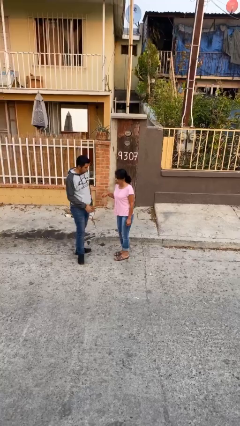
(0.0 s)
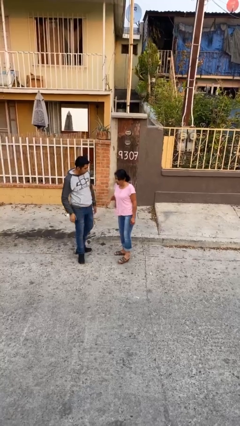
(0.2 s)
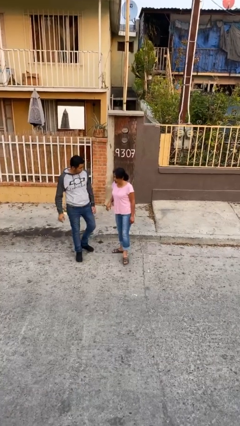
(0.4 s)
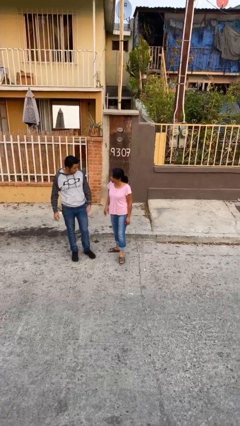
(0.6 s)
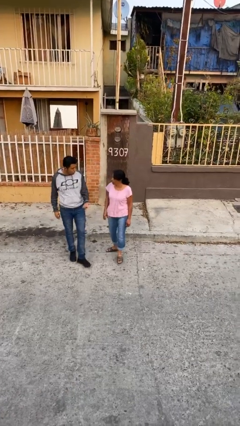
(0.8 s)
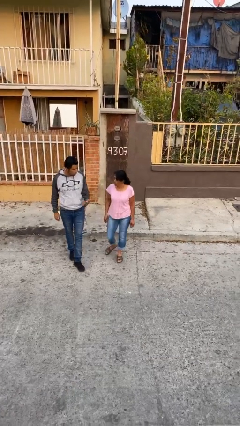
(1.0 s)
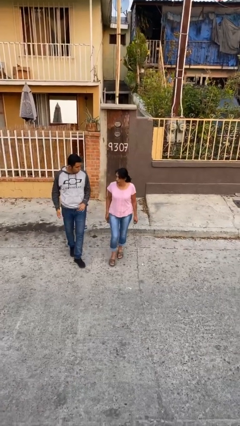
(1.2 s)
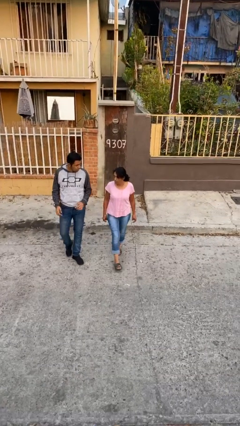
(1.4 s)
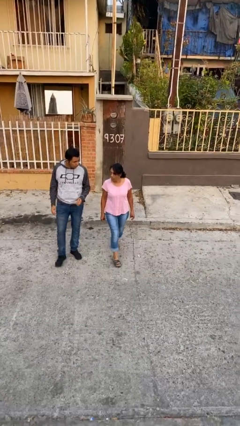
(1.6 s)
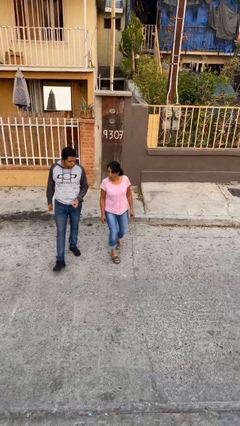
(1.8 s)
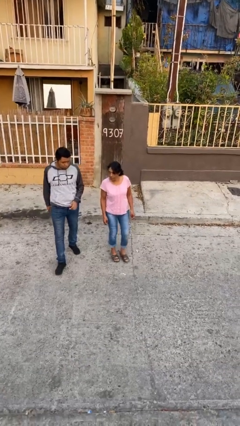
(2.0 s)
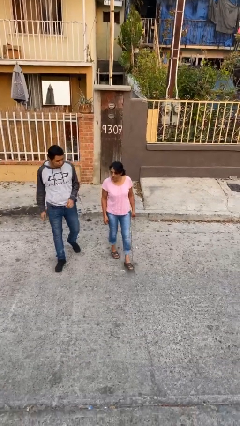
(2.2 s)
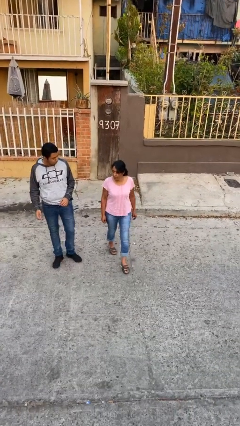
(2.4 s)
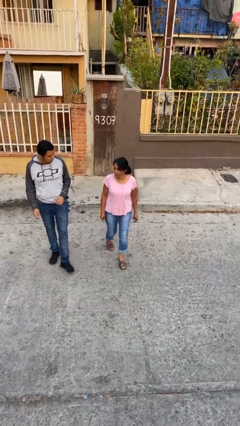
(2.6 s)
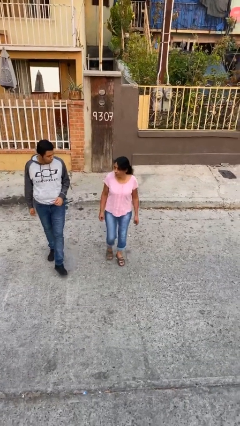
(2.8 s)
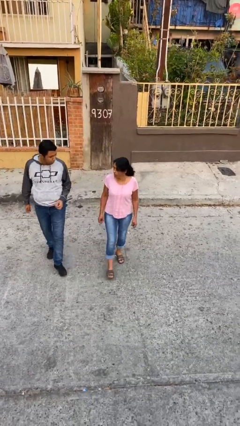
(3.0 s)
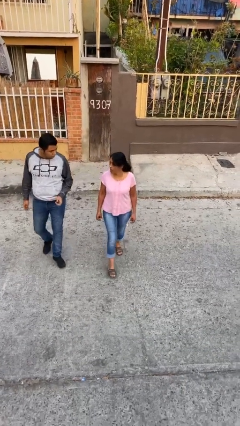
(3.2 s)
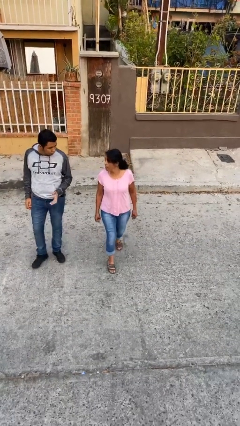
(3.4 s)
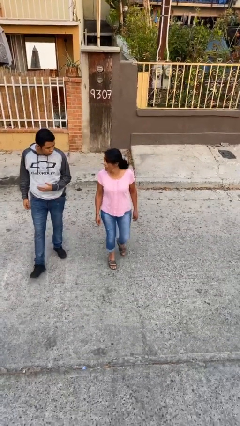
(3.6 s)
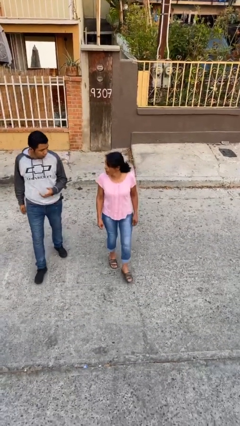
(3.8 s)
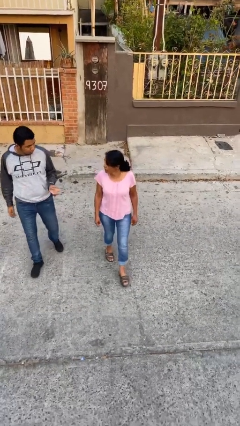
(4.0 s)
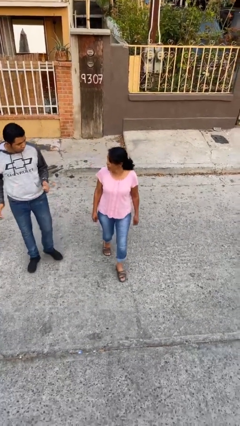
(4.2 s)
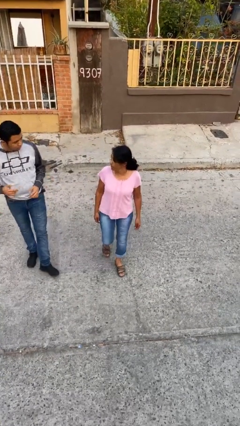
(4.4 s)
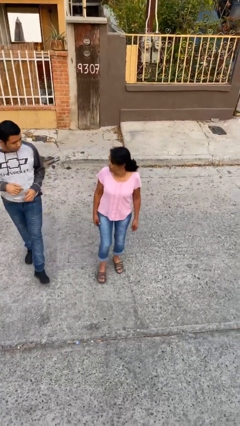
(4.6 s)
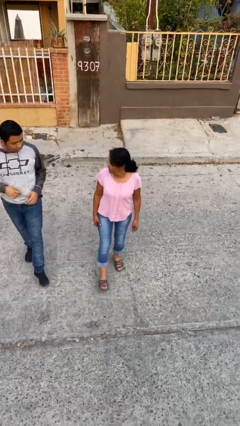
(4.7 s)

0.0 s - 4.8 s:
person talks to person

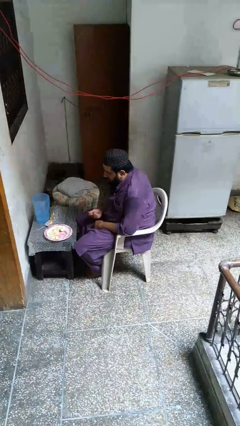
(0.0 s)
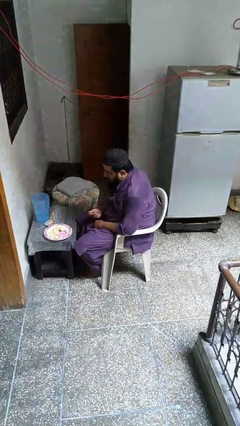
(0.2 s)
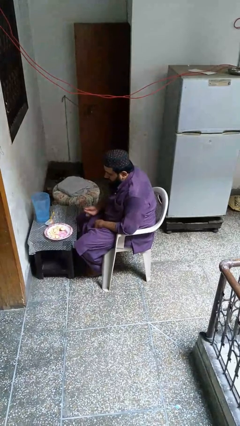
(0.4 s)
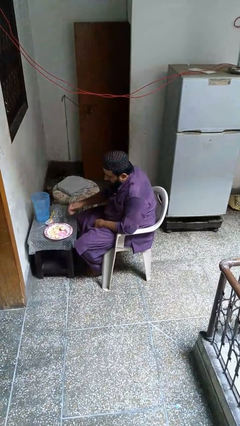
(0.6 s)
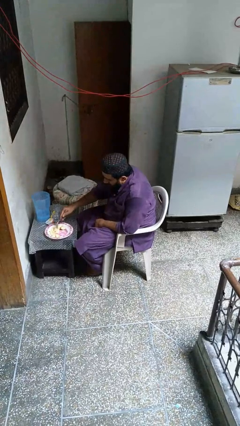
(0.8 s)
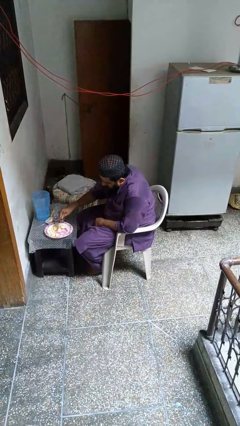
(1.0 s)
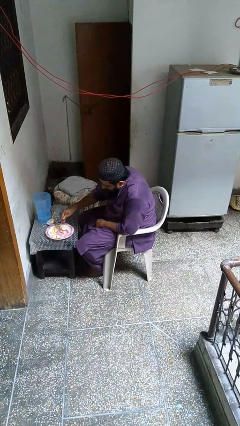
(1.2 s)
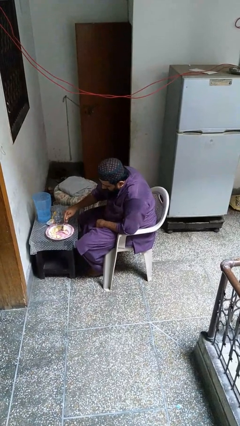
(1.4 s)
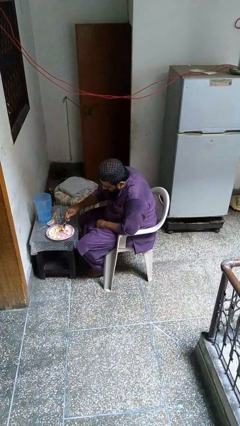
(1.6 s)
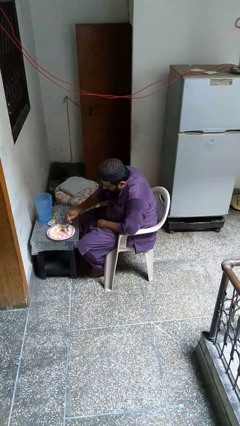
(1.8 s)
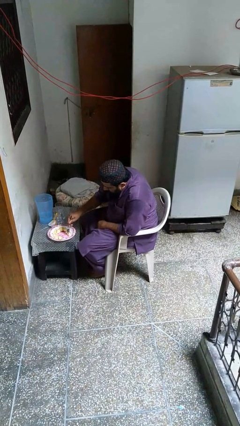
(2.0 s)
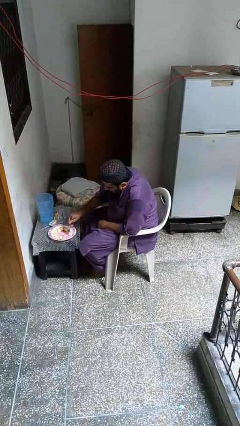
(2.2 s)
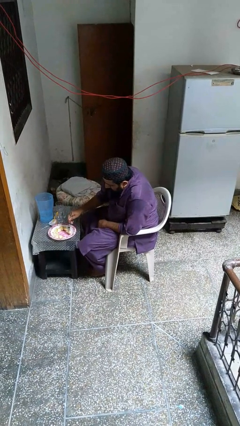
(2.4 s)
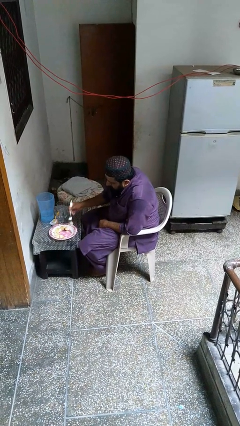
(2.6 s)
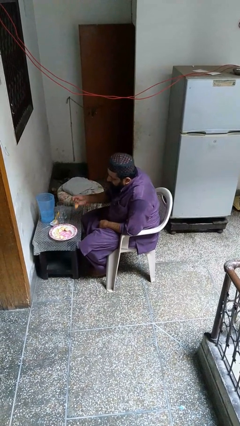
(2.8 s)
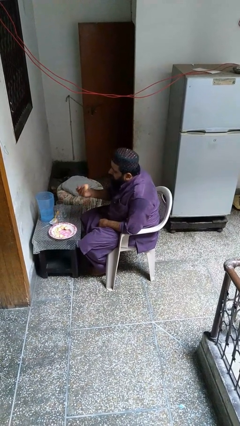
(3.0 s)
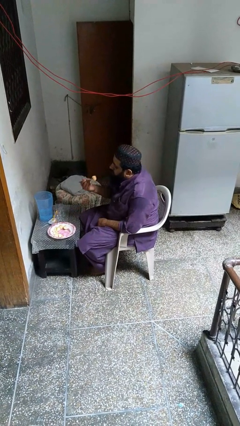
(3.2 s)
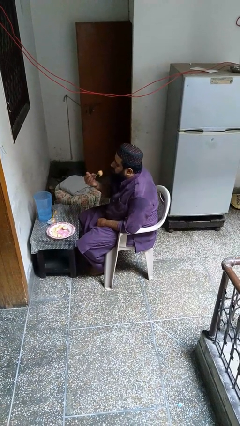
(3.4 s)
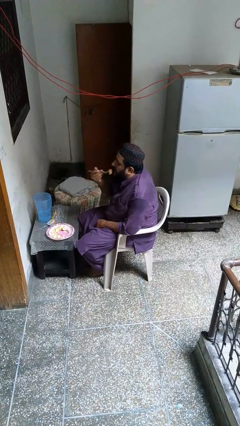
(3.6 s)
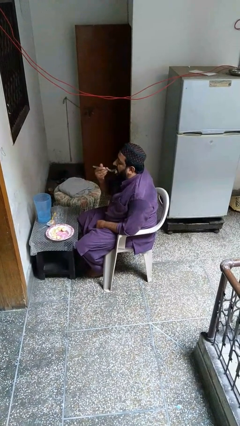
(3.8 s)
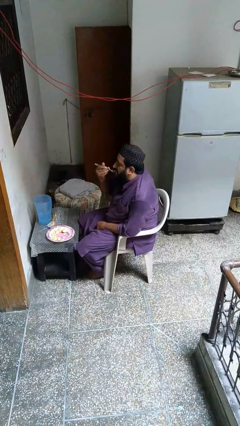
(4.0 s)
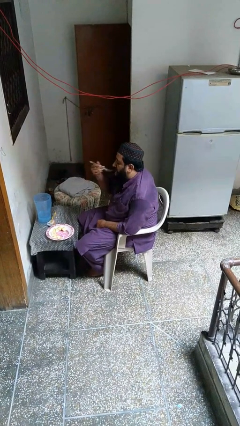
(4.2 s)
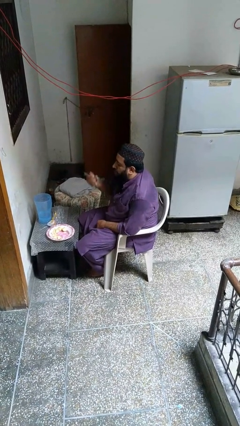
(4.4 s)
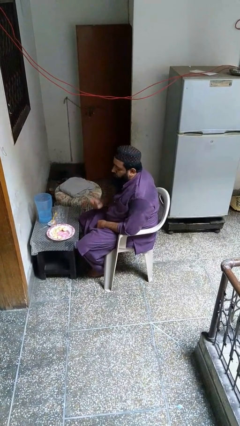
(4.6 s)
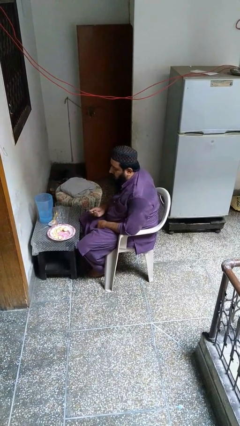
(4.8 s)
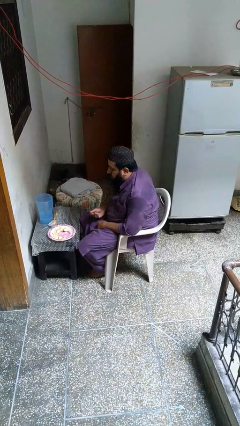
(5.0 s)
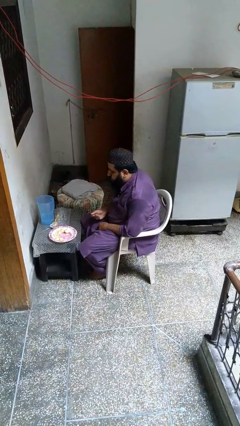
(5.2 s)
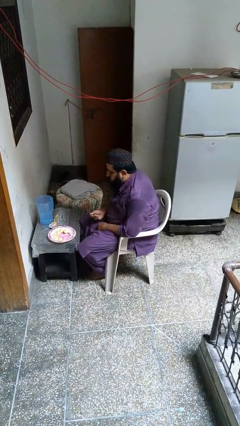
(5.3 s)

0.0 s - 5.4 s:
person eats with utensil

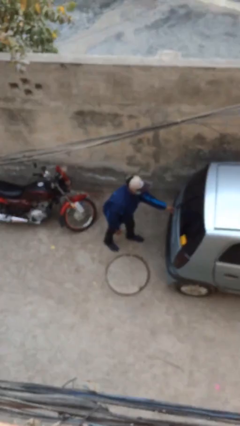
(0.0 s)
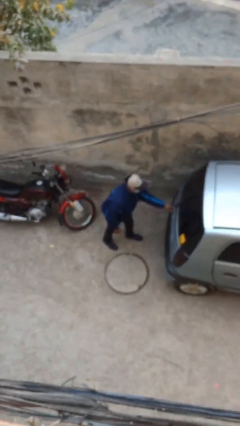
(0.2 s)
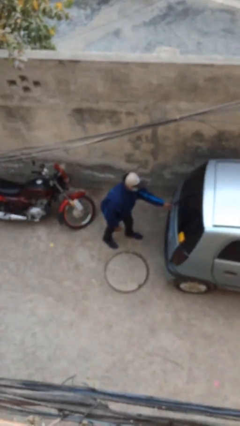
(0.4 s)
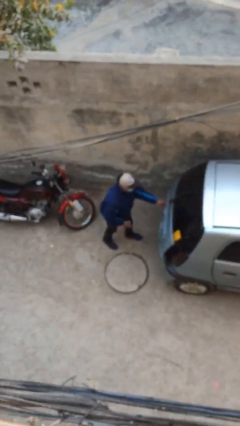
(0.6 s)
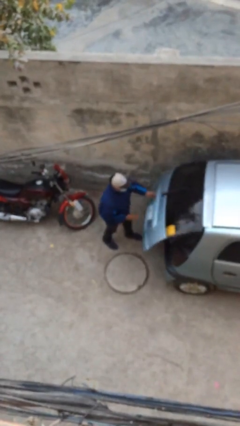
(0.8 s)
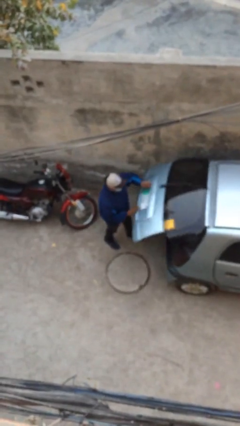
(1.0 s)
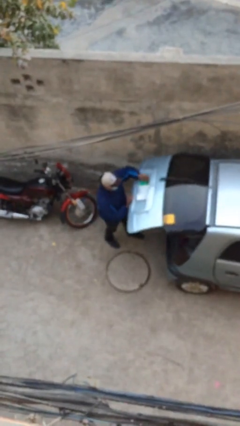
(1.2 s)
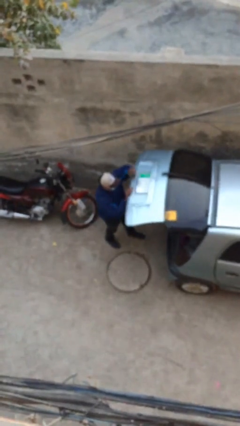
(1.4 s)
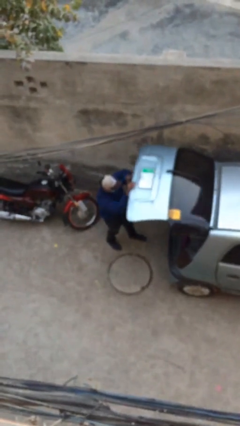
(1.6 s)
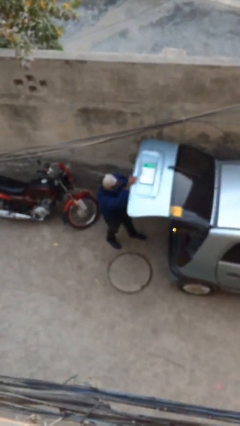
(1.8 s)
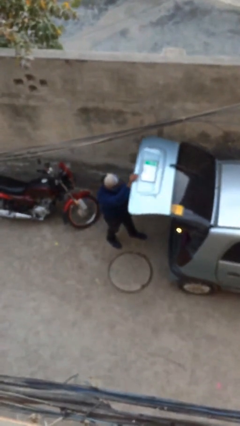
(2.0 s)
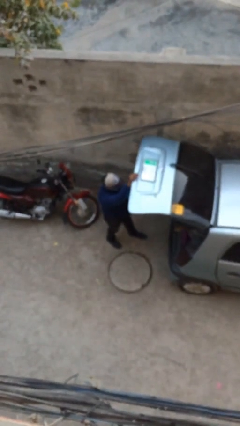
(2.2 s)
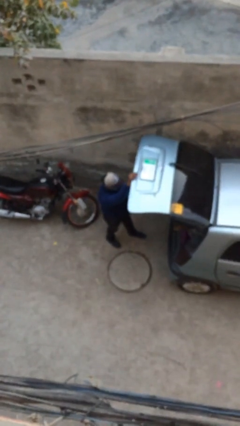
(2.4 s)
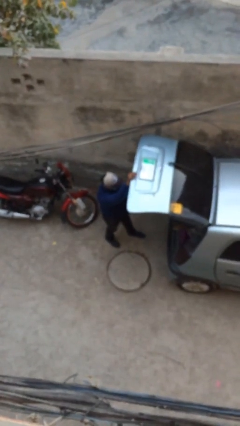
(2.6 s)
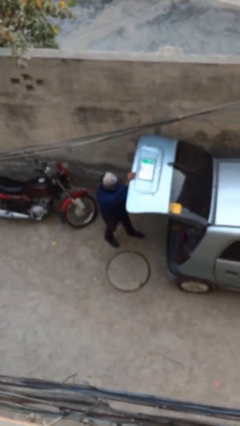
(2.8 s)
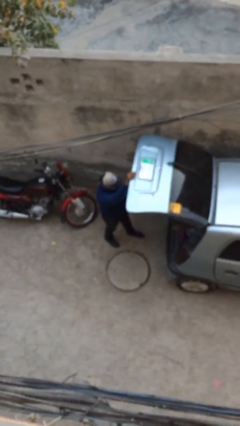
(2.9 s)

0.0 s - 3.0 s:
person opens car trunk

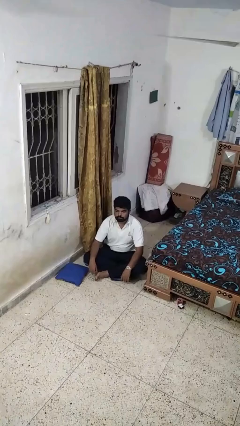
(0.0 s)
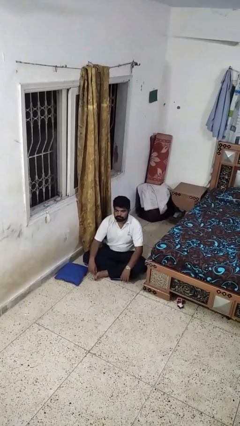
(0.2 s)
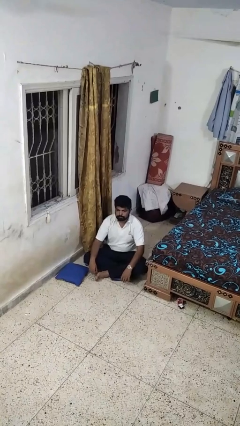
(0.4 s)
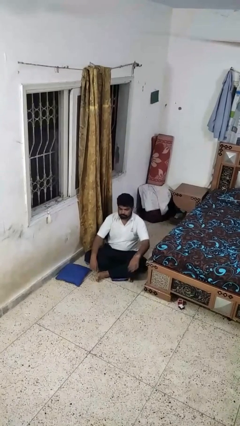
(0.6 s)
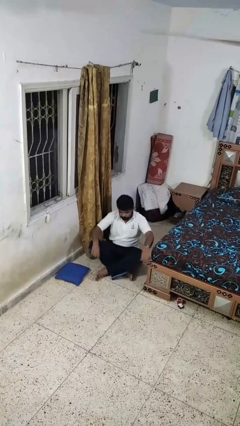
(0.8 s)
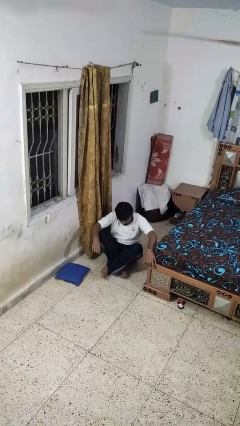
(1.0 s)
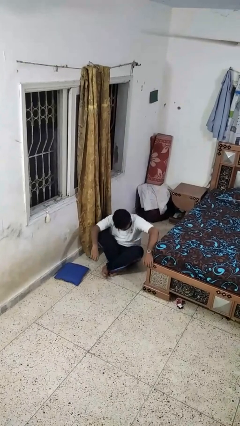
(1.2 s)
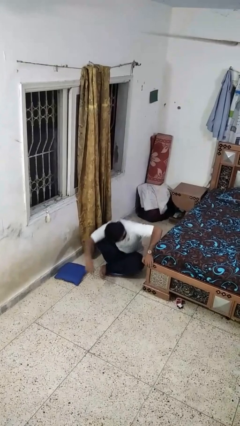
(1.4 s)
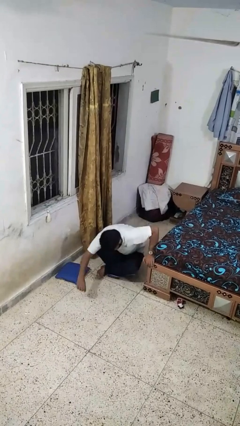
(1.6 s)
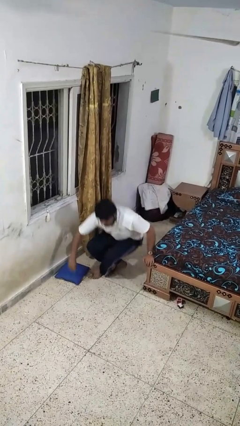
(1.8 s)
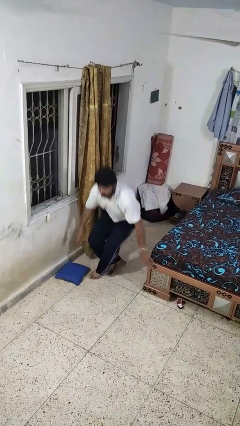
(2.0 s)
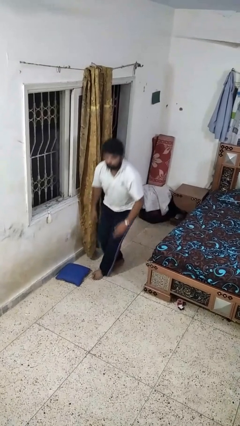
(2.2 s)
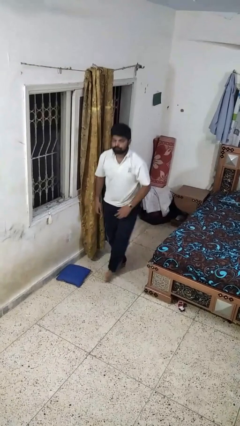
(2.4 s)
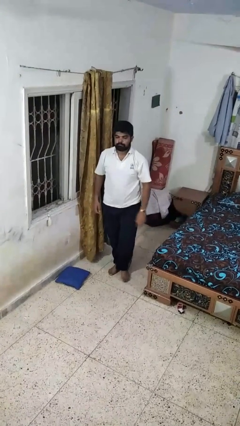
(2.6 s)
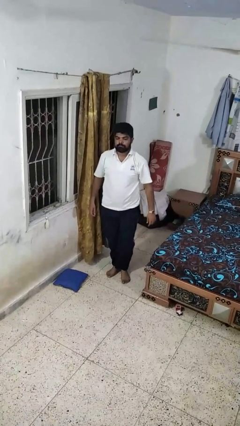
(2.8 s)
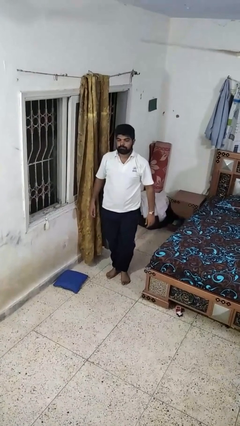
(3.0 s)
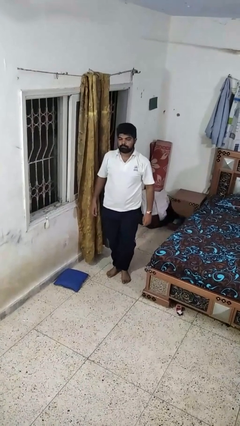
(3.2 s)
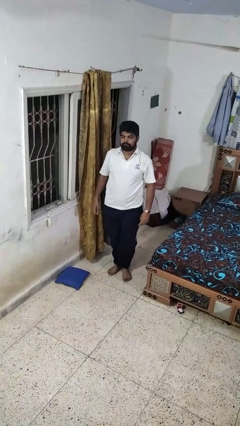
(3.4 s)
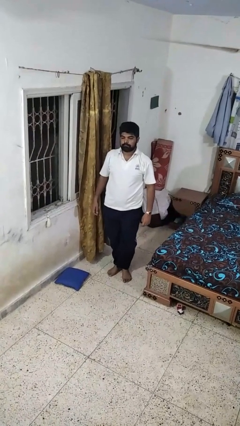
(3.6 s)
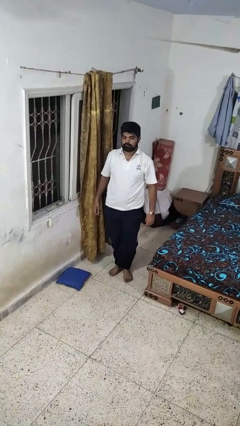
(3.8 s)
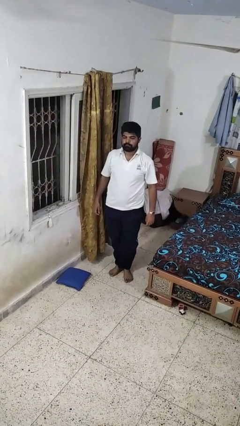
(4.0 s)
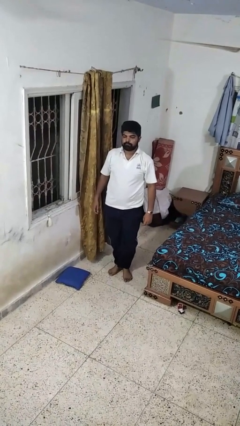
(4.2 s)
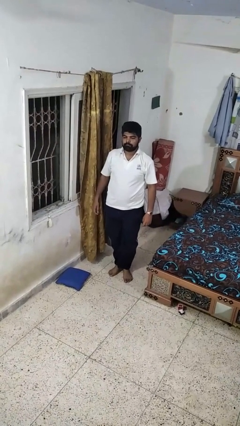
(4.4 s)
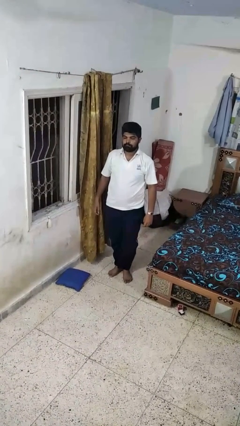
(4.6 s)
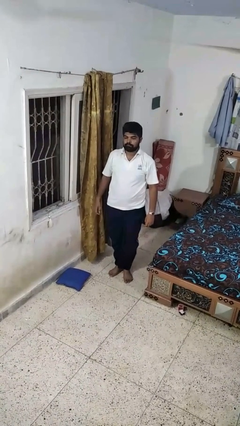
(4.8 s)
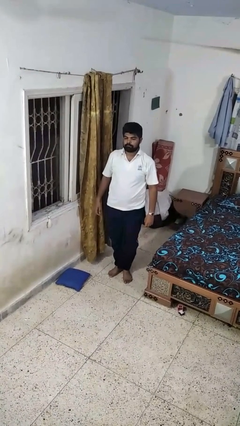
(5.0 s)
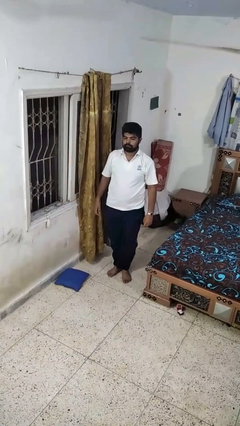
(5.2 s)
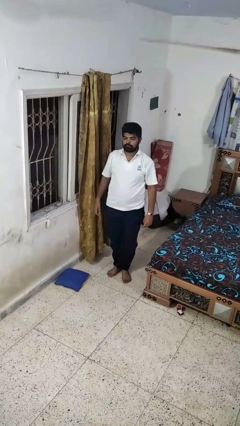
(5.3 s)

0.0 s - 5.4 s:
person stands up from floor
